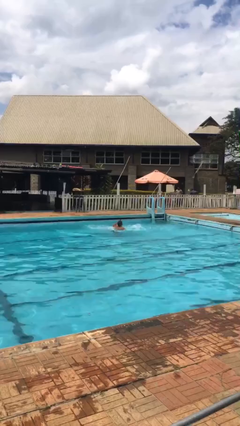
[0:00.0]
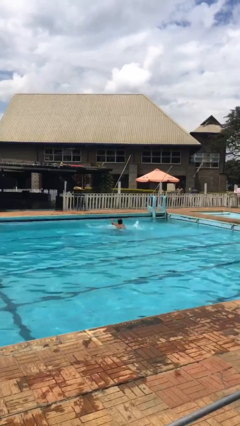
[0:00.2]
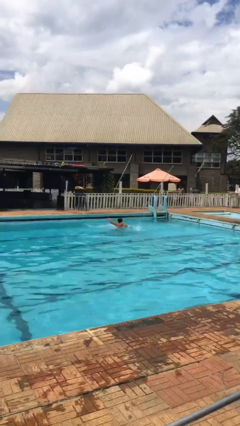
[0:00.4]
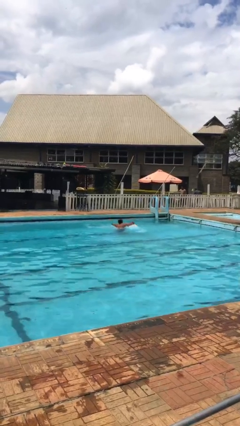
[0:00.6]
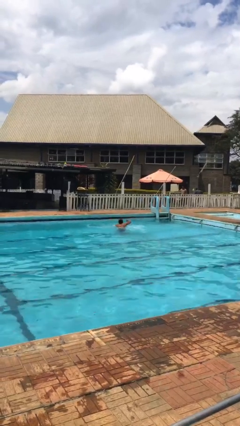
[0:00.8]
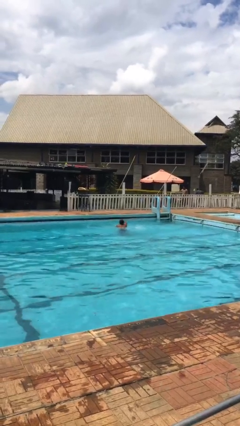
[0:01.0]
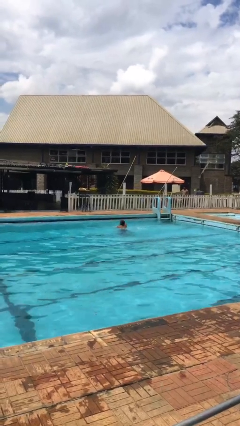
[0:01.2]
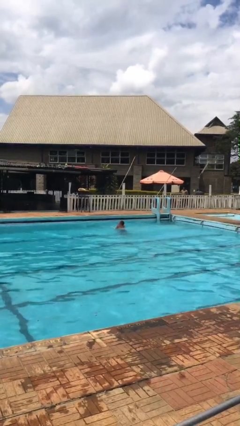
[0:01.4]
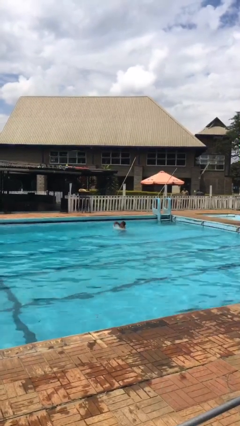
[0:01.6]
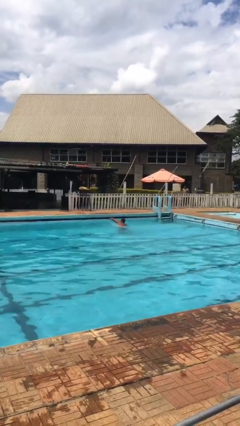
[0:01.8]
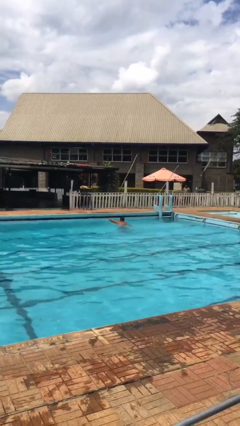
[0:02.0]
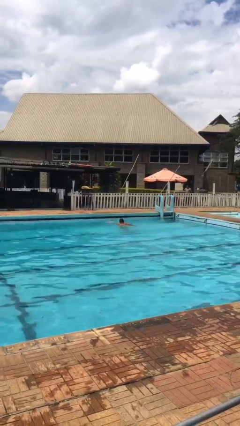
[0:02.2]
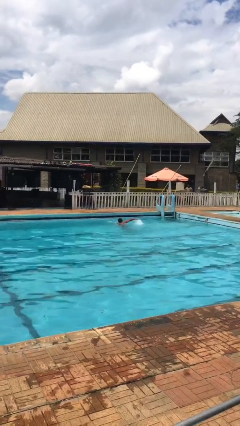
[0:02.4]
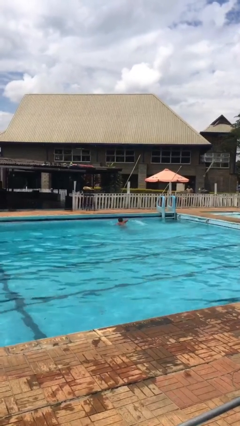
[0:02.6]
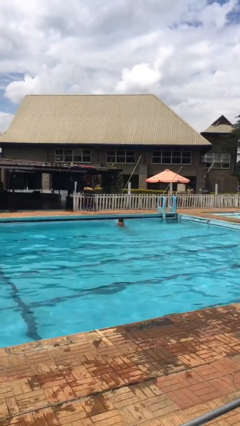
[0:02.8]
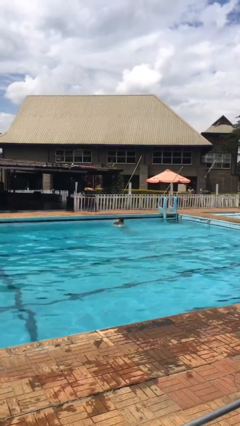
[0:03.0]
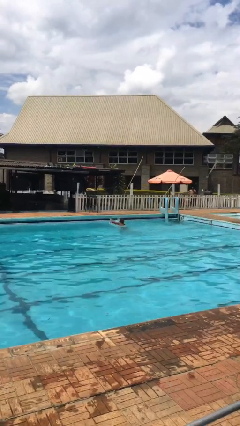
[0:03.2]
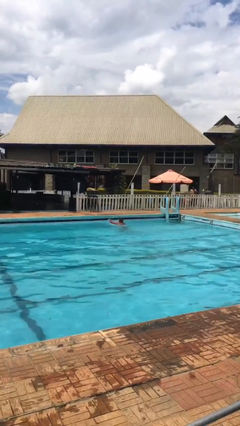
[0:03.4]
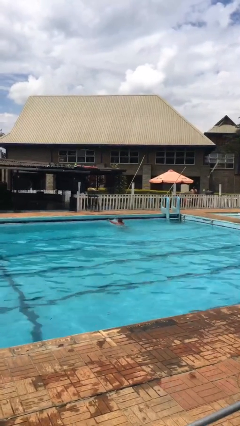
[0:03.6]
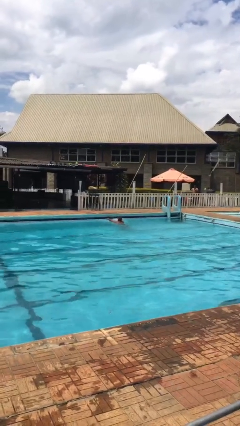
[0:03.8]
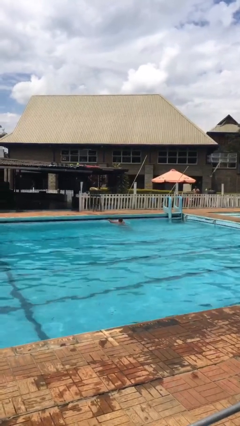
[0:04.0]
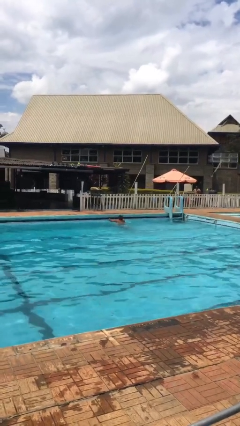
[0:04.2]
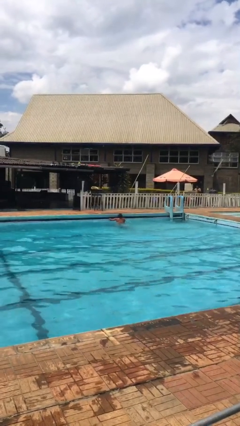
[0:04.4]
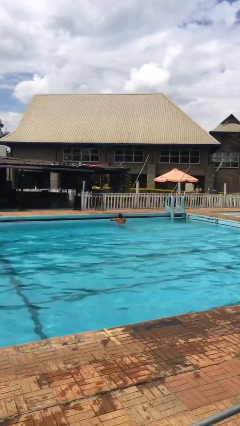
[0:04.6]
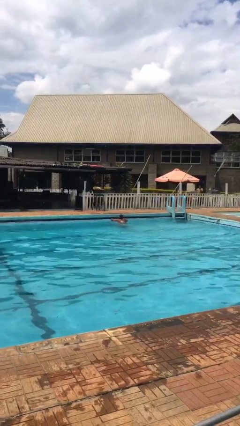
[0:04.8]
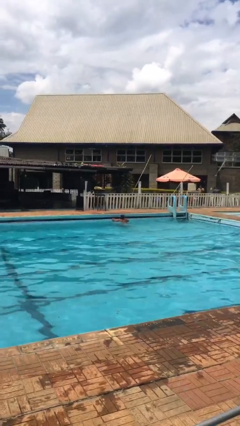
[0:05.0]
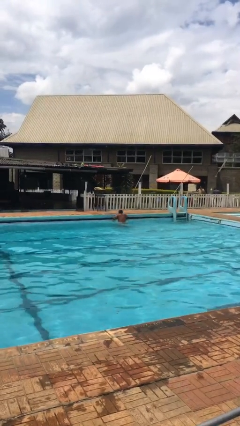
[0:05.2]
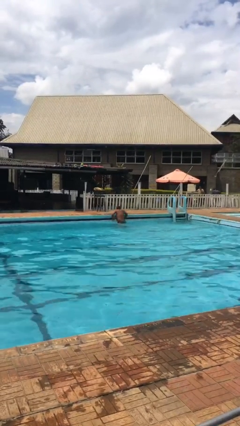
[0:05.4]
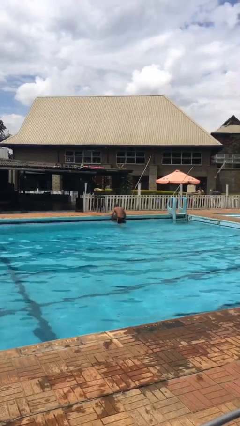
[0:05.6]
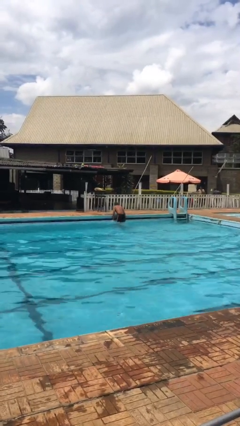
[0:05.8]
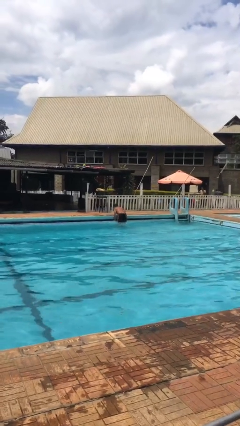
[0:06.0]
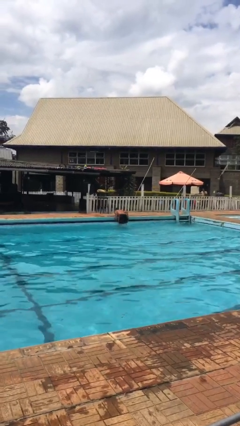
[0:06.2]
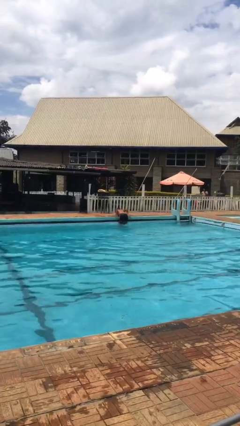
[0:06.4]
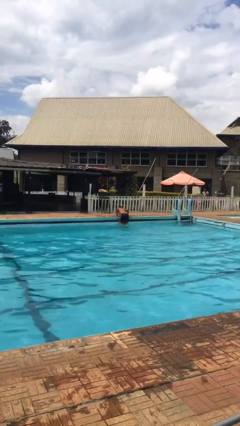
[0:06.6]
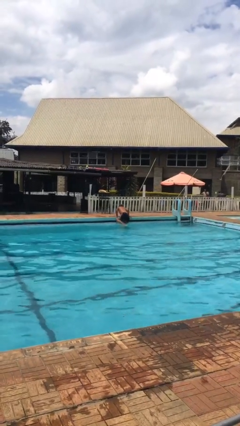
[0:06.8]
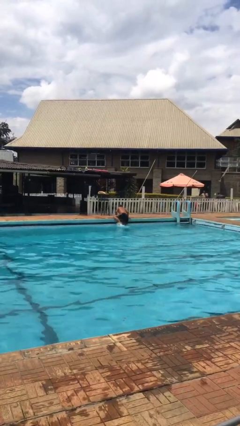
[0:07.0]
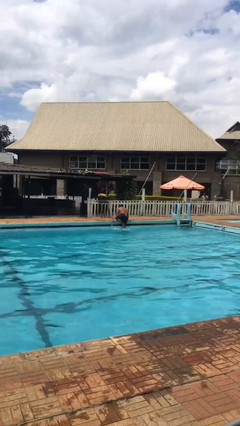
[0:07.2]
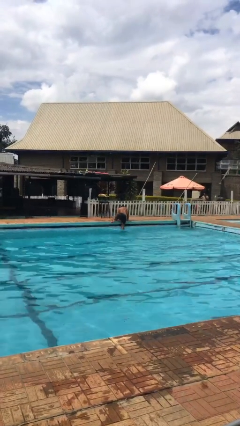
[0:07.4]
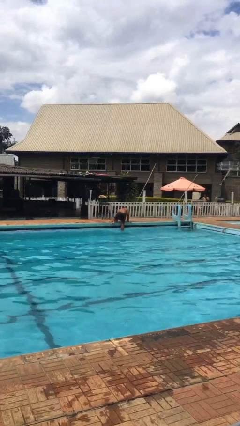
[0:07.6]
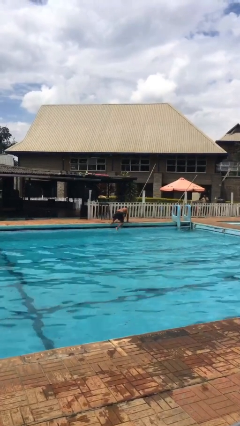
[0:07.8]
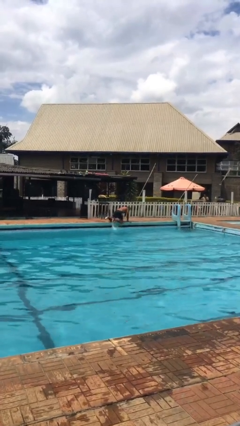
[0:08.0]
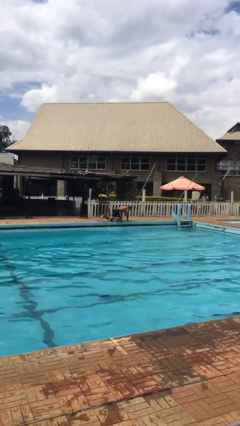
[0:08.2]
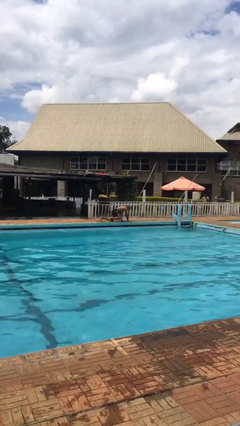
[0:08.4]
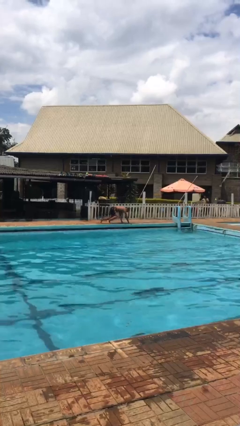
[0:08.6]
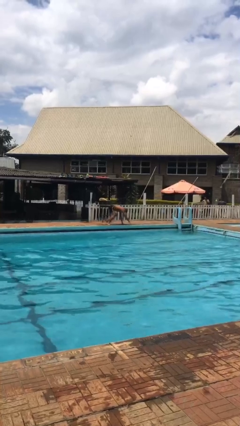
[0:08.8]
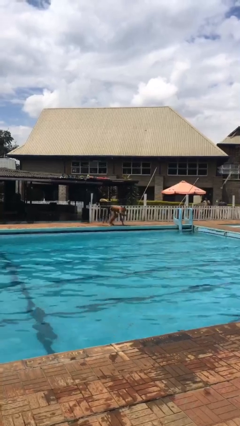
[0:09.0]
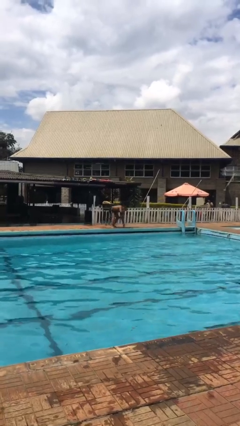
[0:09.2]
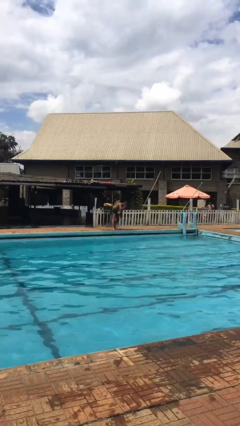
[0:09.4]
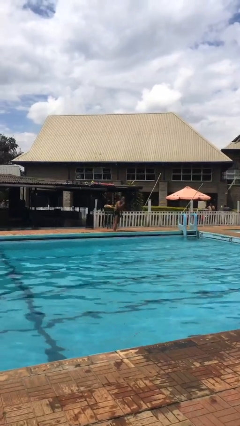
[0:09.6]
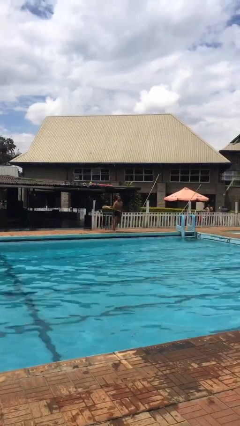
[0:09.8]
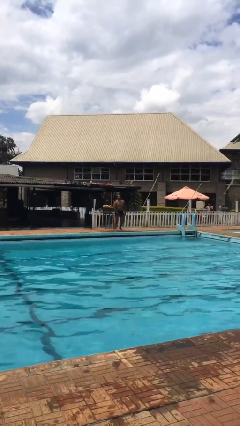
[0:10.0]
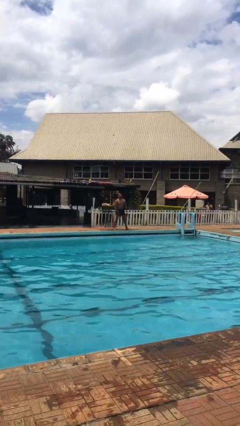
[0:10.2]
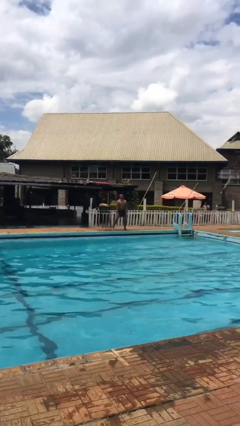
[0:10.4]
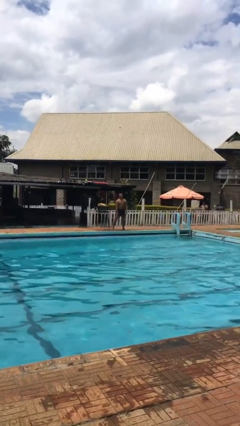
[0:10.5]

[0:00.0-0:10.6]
person exits pool

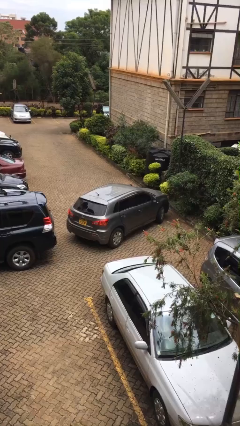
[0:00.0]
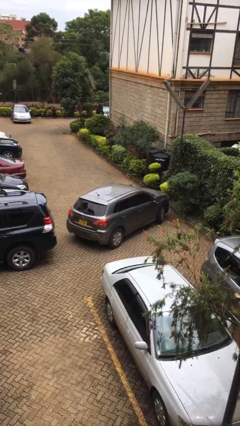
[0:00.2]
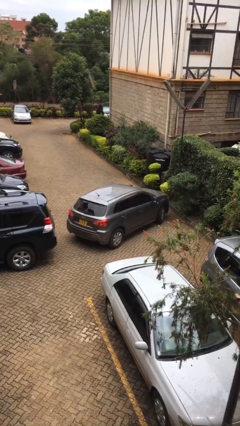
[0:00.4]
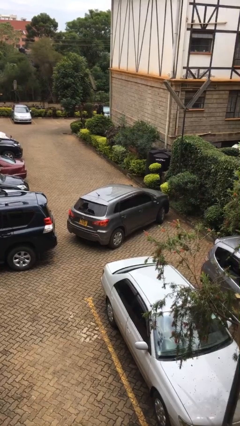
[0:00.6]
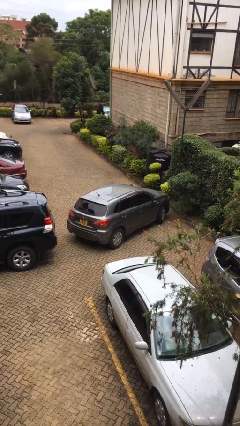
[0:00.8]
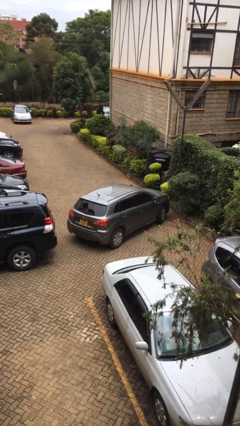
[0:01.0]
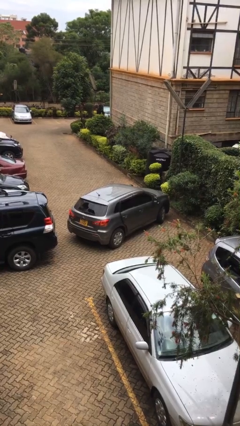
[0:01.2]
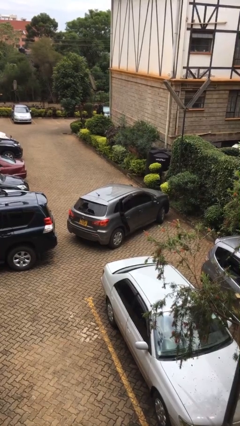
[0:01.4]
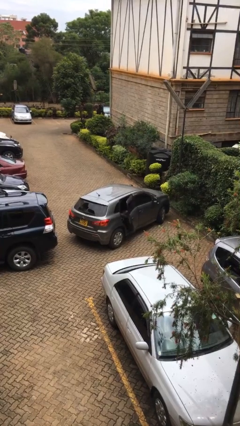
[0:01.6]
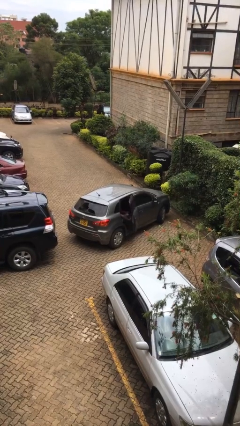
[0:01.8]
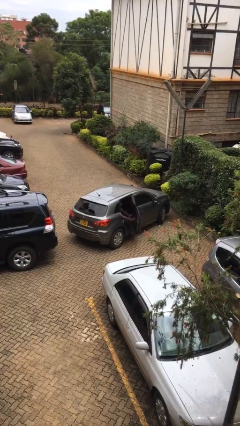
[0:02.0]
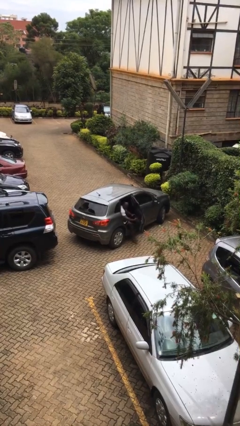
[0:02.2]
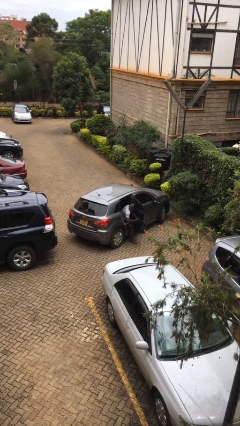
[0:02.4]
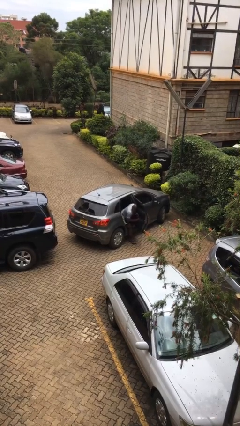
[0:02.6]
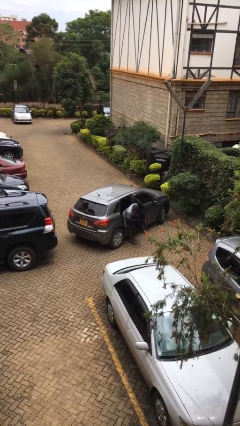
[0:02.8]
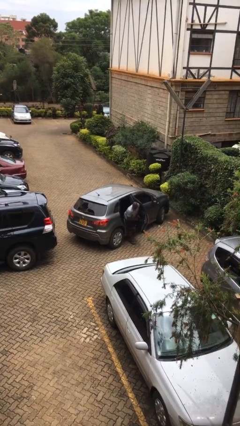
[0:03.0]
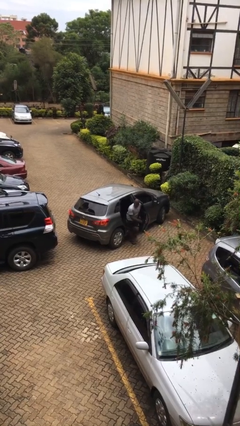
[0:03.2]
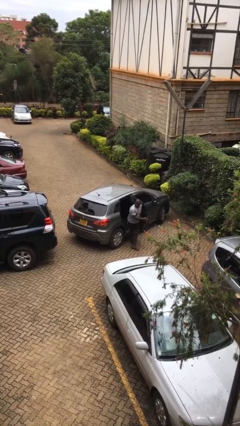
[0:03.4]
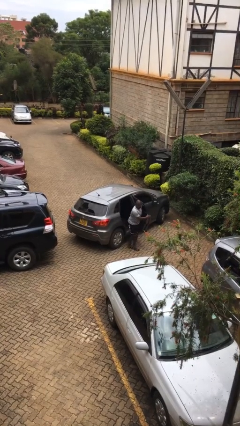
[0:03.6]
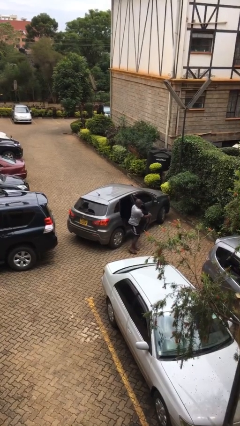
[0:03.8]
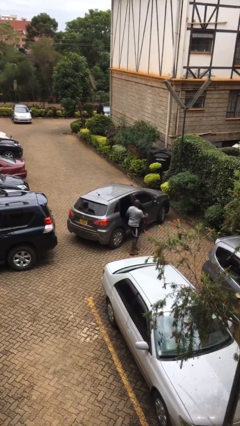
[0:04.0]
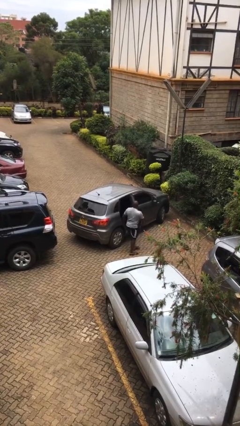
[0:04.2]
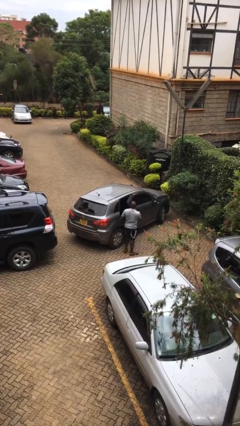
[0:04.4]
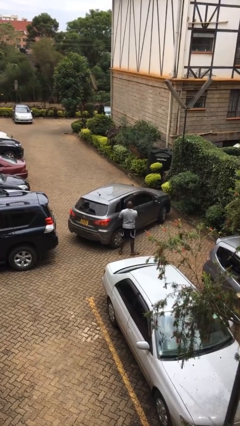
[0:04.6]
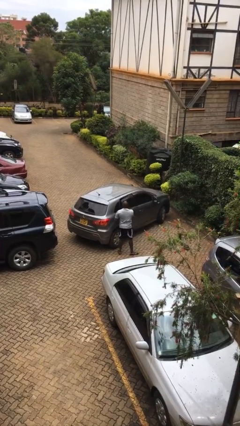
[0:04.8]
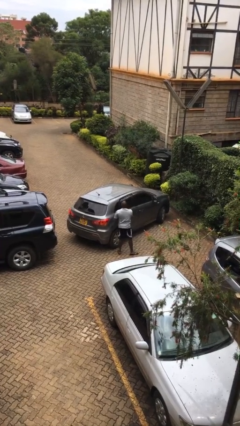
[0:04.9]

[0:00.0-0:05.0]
car drops off person

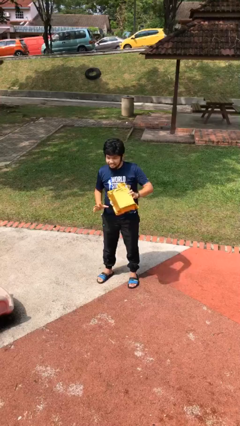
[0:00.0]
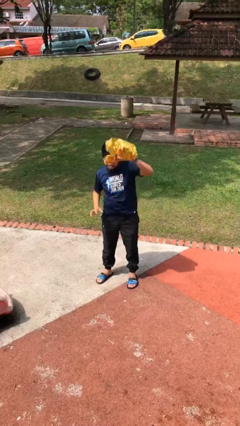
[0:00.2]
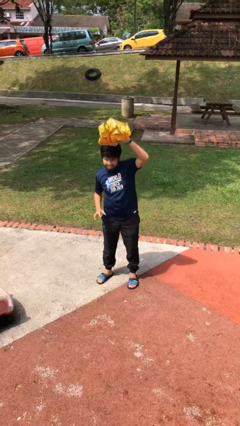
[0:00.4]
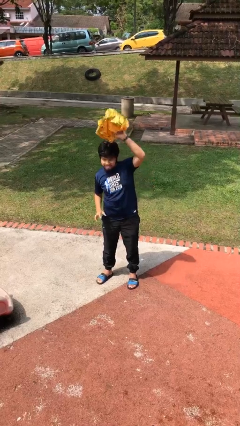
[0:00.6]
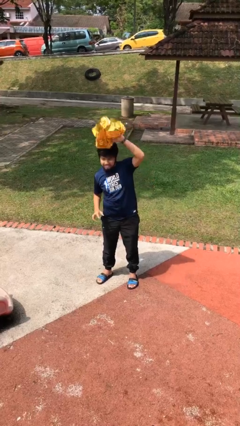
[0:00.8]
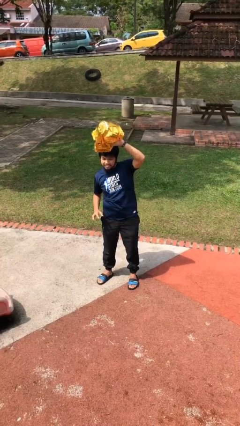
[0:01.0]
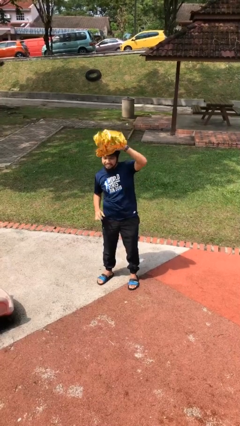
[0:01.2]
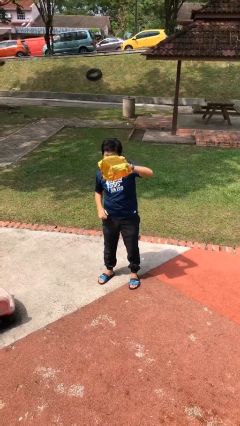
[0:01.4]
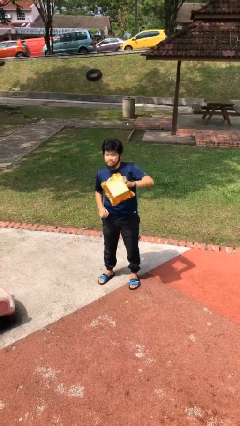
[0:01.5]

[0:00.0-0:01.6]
person holds object above head

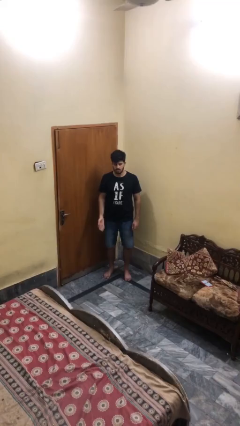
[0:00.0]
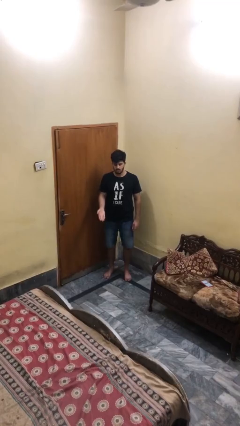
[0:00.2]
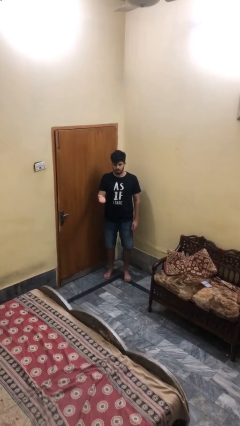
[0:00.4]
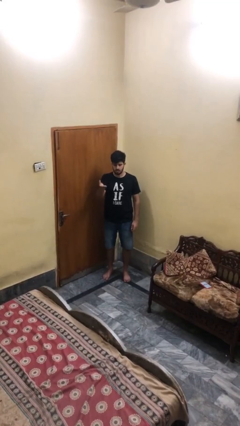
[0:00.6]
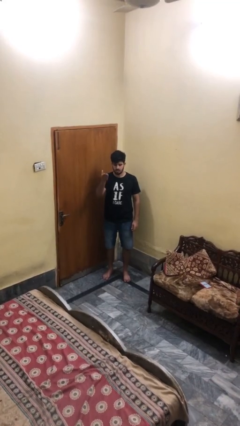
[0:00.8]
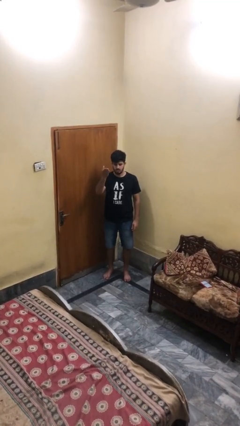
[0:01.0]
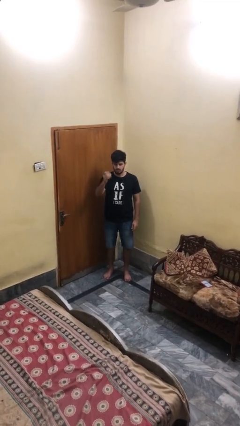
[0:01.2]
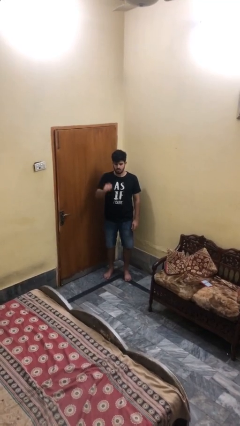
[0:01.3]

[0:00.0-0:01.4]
person gestures swipe up
